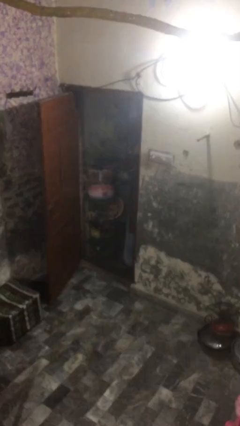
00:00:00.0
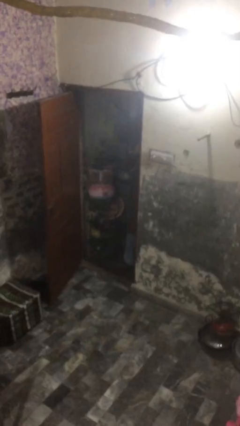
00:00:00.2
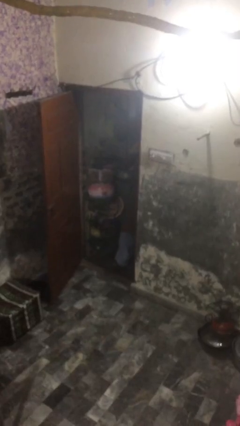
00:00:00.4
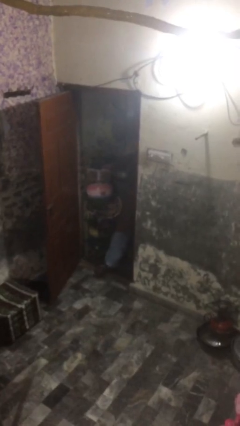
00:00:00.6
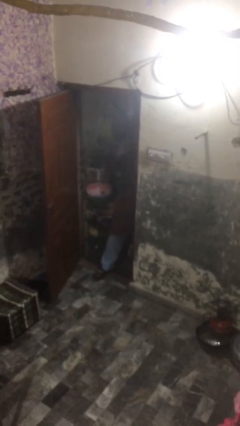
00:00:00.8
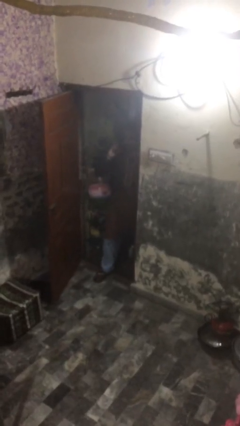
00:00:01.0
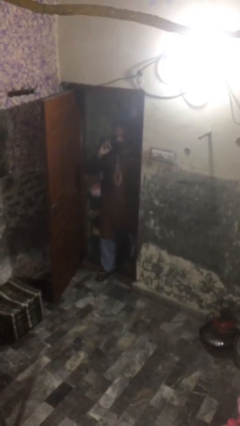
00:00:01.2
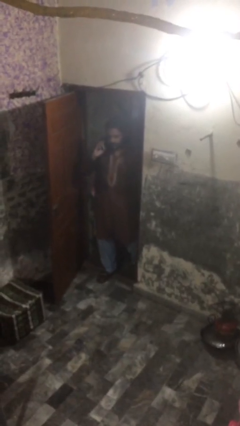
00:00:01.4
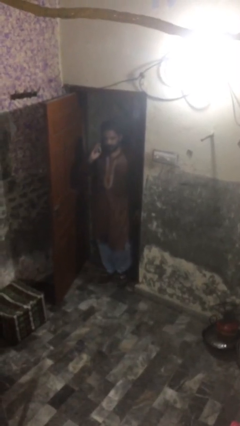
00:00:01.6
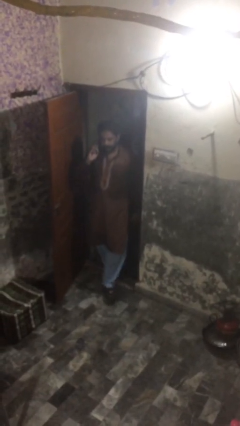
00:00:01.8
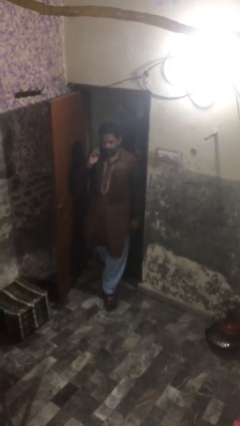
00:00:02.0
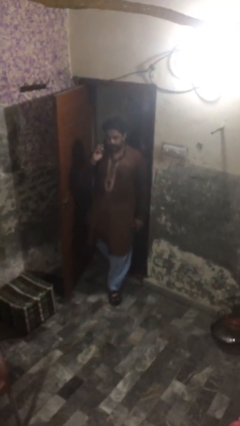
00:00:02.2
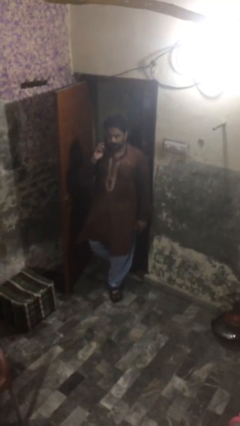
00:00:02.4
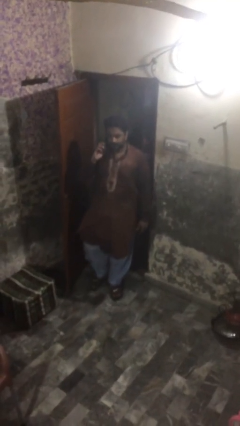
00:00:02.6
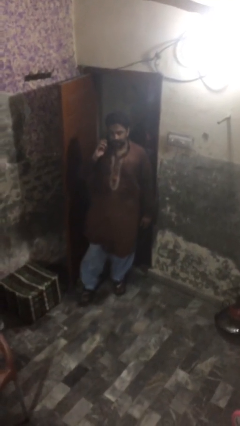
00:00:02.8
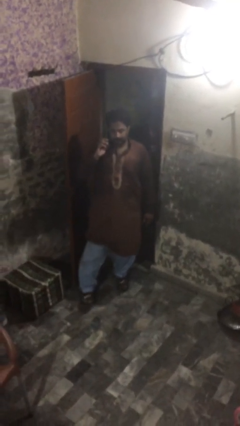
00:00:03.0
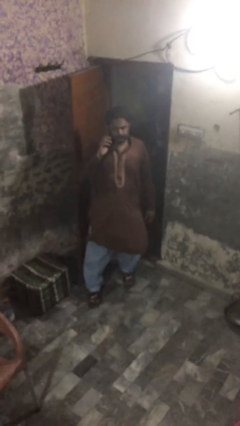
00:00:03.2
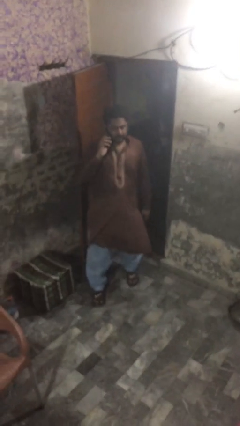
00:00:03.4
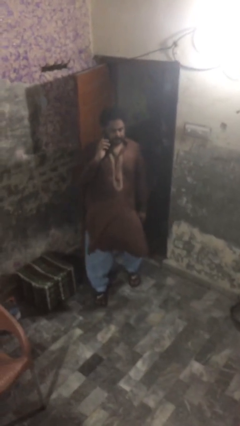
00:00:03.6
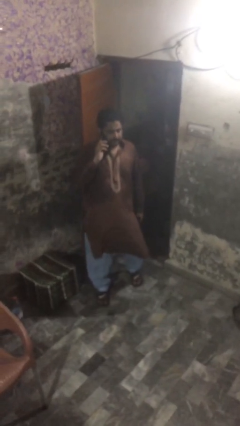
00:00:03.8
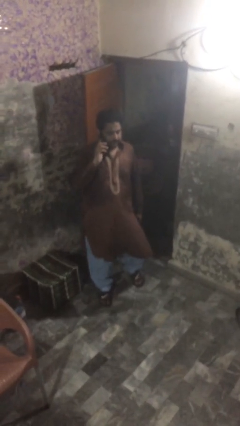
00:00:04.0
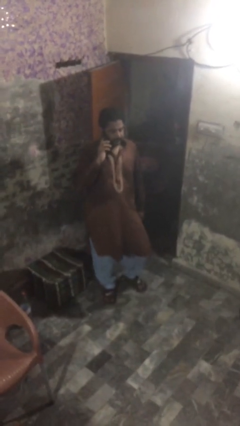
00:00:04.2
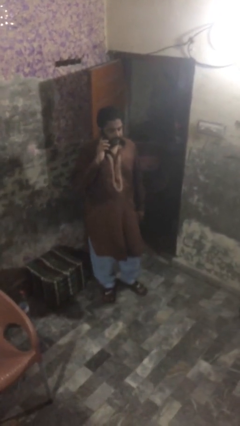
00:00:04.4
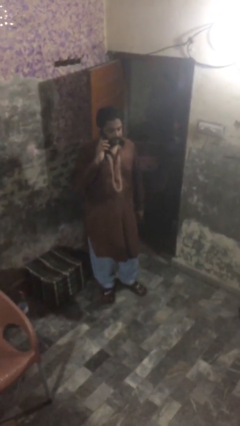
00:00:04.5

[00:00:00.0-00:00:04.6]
person enters scene through structure

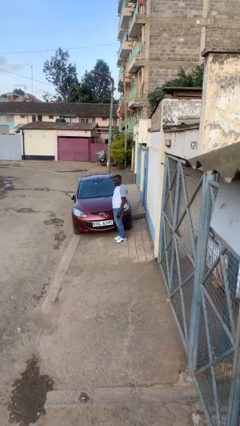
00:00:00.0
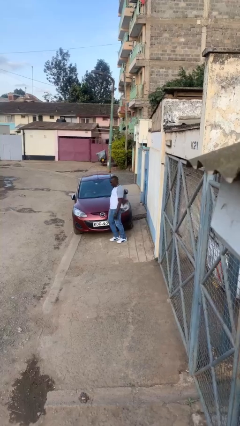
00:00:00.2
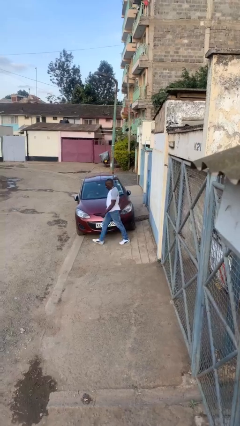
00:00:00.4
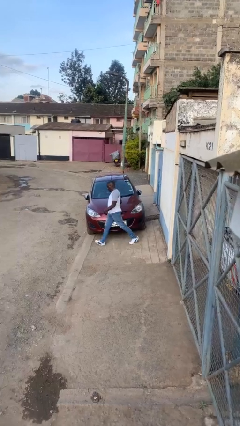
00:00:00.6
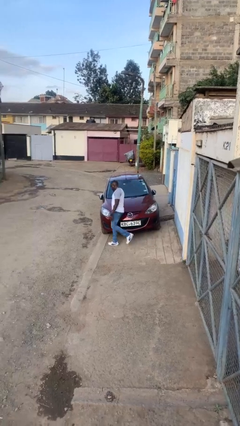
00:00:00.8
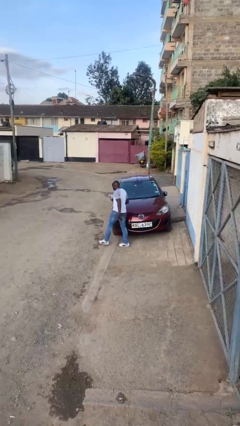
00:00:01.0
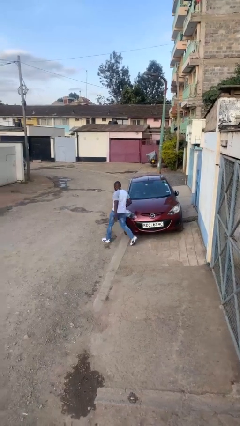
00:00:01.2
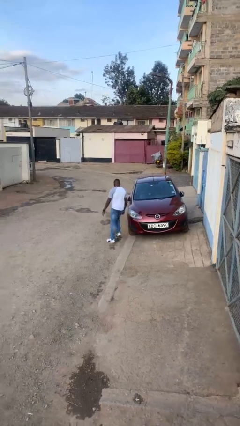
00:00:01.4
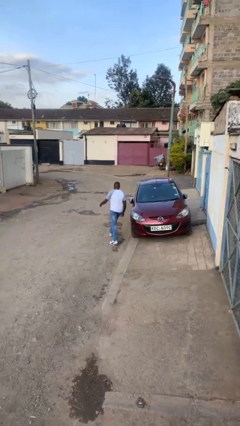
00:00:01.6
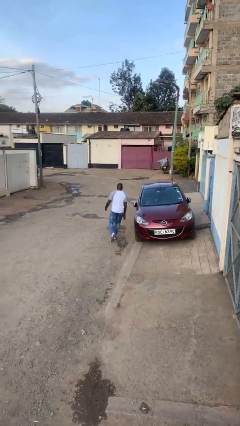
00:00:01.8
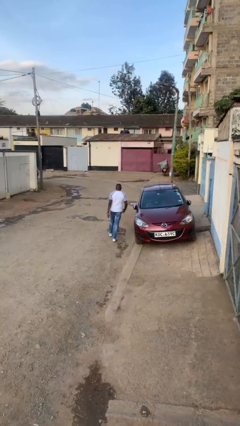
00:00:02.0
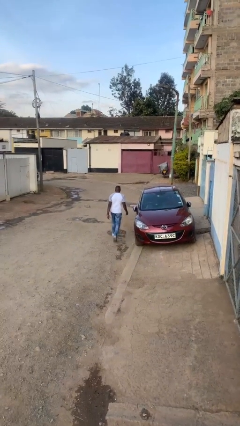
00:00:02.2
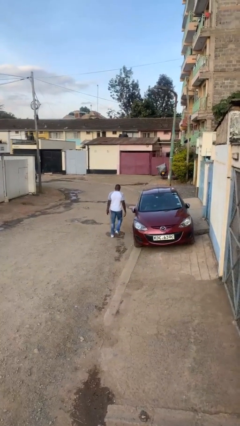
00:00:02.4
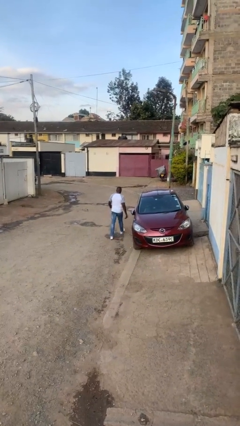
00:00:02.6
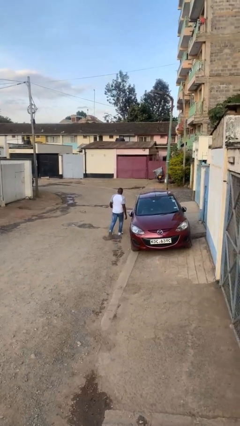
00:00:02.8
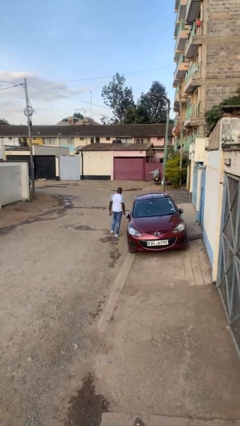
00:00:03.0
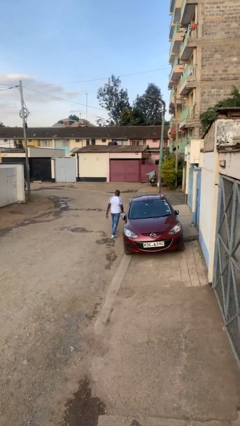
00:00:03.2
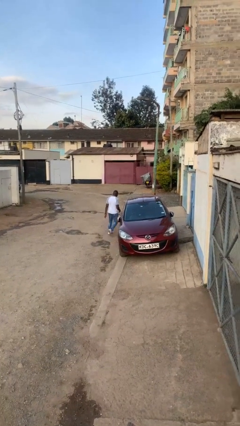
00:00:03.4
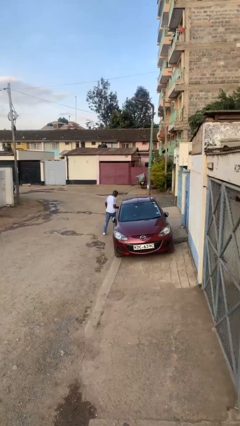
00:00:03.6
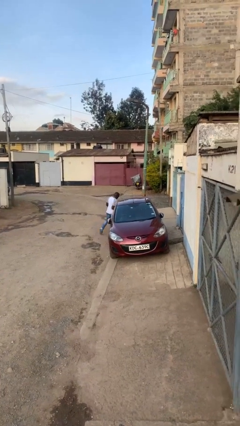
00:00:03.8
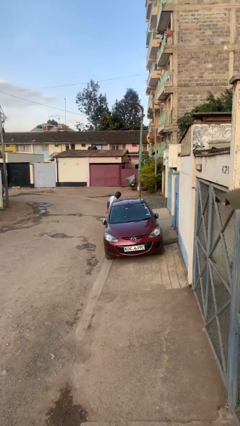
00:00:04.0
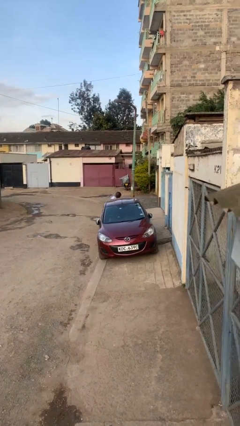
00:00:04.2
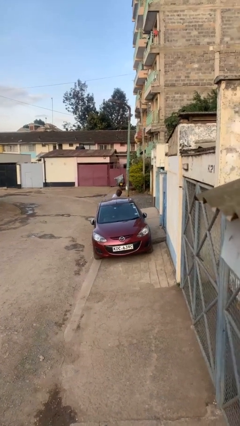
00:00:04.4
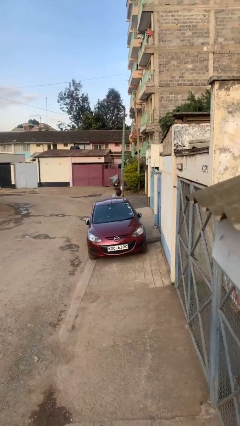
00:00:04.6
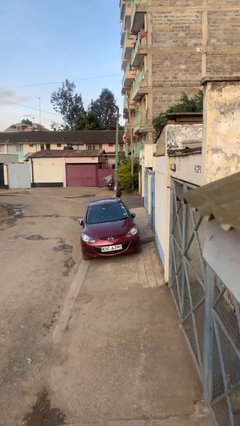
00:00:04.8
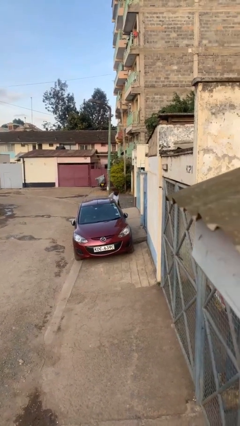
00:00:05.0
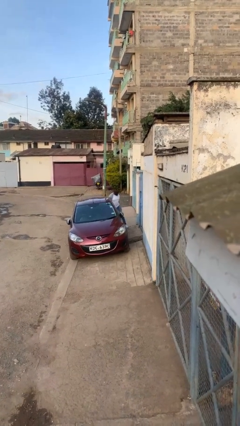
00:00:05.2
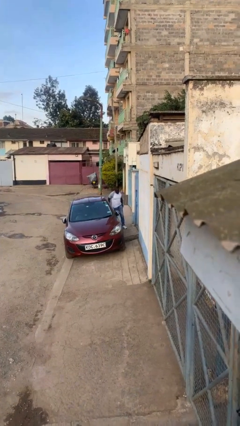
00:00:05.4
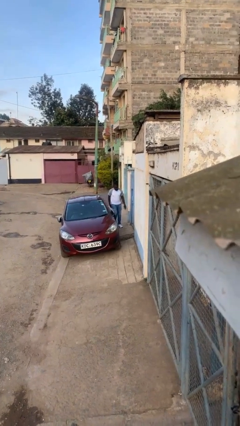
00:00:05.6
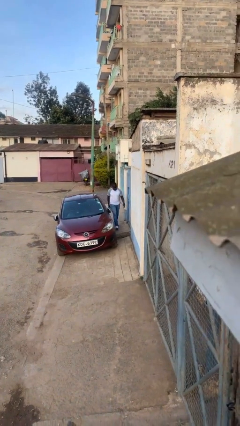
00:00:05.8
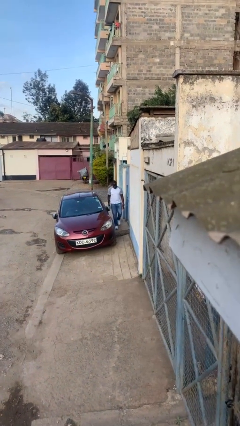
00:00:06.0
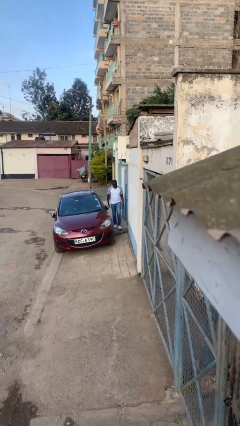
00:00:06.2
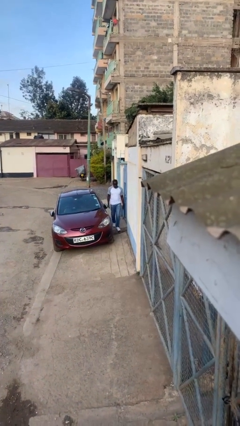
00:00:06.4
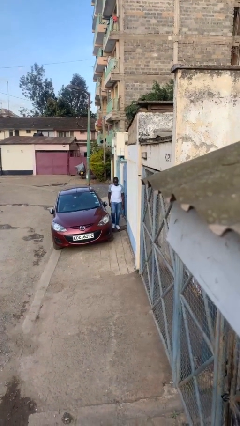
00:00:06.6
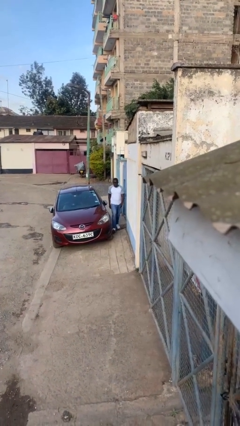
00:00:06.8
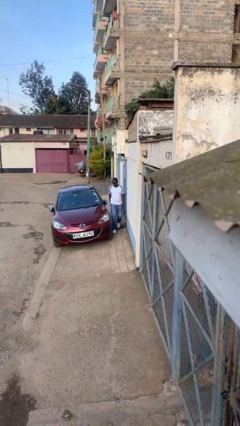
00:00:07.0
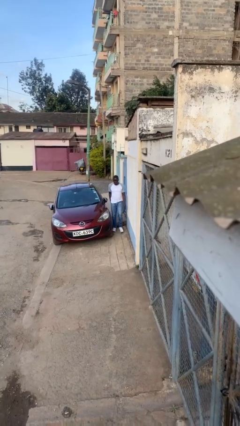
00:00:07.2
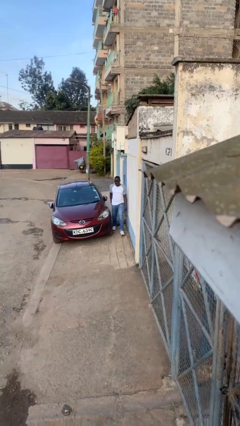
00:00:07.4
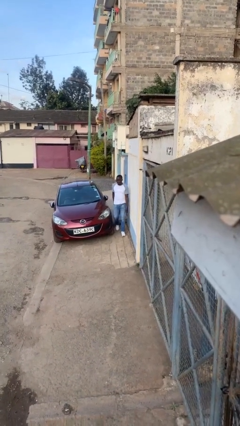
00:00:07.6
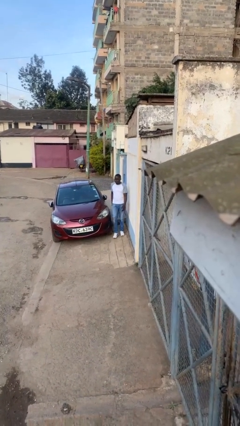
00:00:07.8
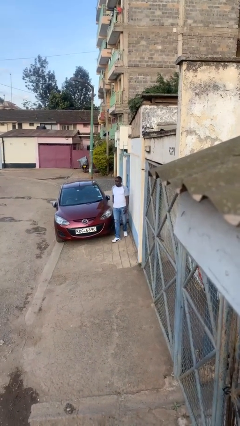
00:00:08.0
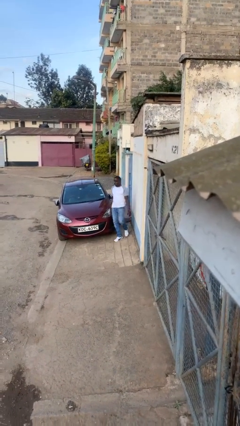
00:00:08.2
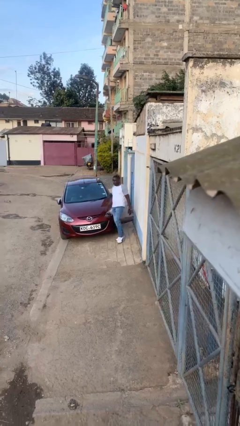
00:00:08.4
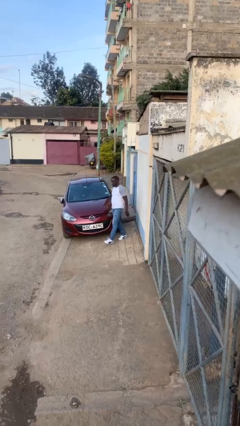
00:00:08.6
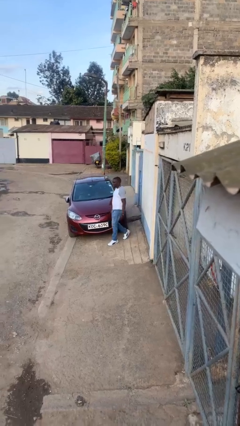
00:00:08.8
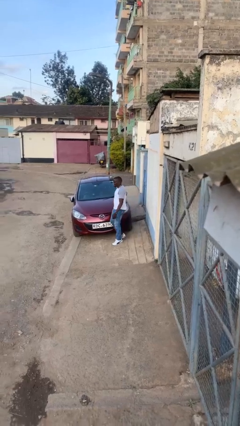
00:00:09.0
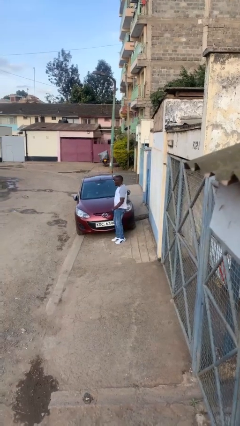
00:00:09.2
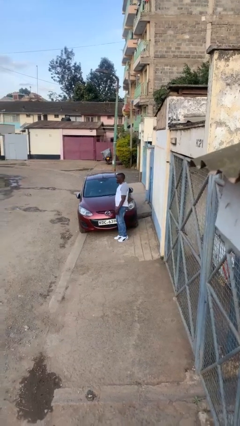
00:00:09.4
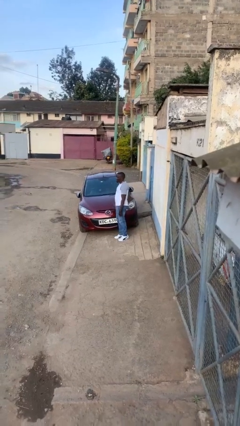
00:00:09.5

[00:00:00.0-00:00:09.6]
person walks around car

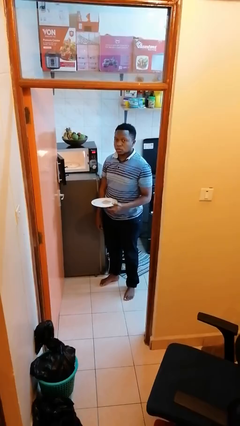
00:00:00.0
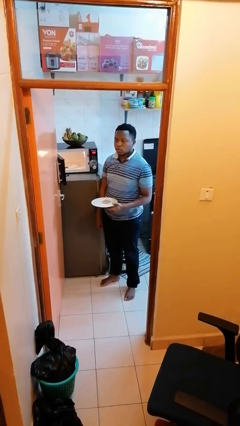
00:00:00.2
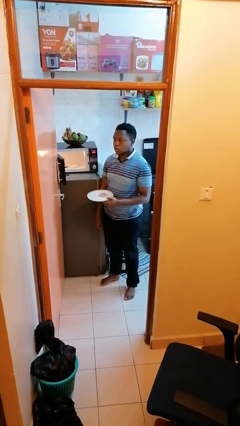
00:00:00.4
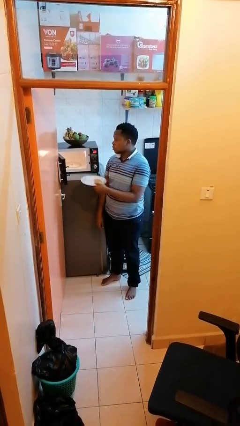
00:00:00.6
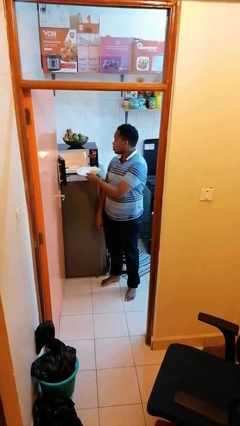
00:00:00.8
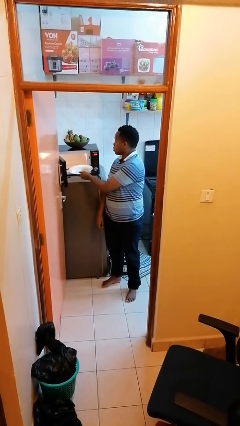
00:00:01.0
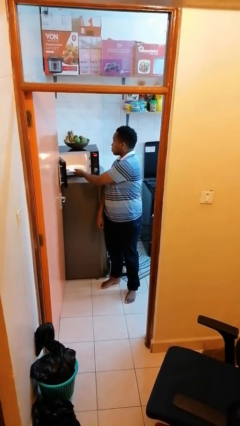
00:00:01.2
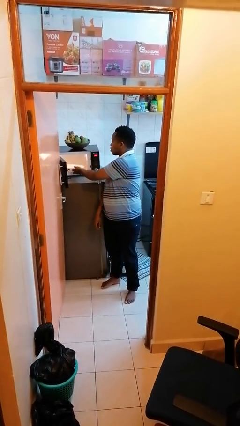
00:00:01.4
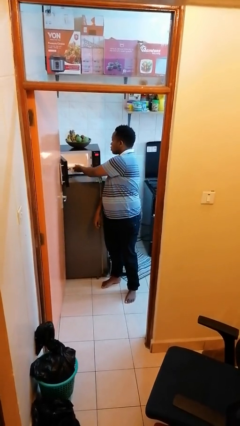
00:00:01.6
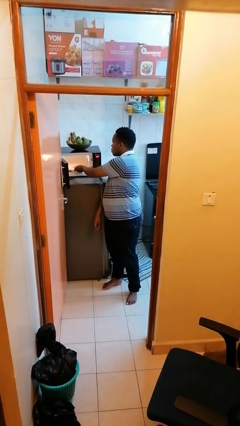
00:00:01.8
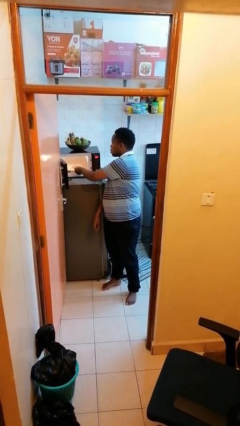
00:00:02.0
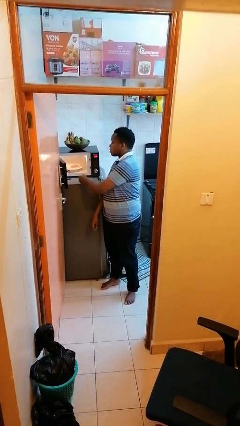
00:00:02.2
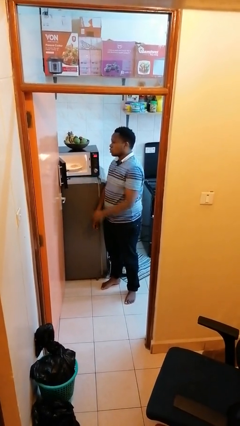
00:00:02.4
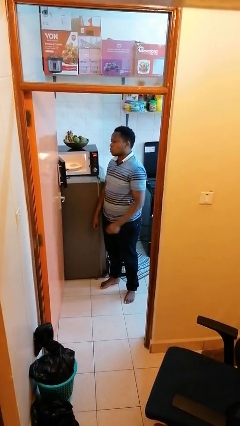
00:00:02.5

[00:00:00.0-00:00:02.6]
person puts object into microwave

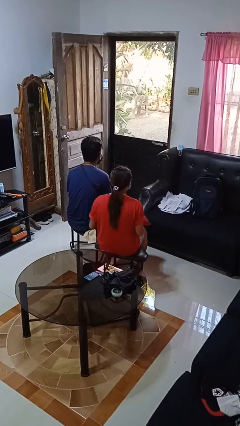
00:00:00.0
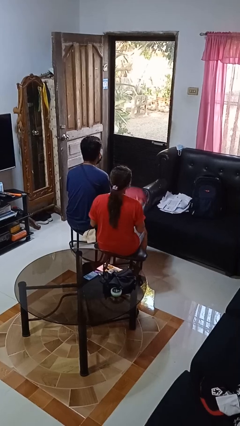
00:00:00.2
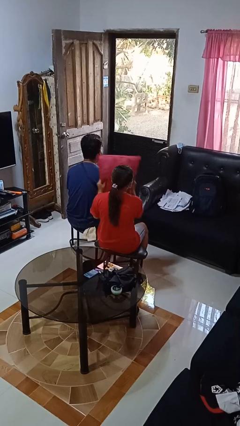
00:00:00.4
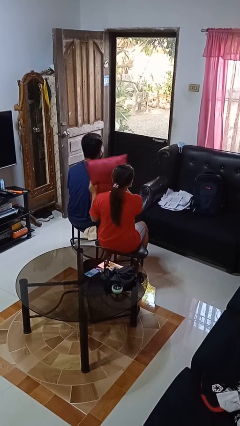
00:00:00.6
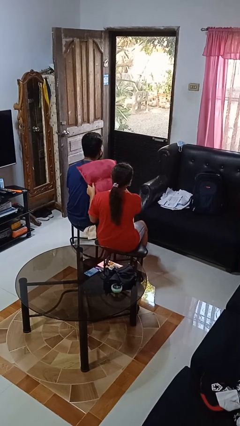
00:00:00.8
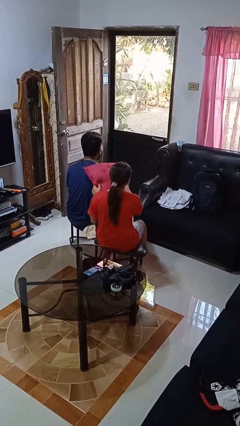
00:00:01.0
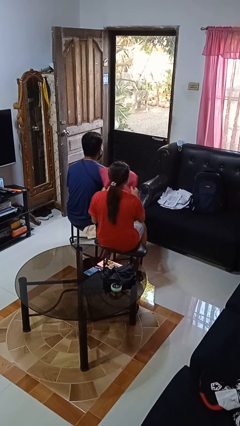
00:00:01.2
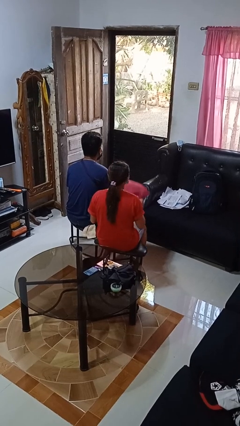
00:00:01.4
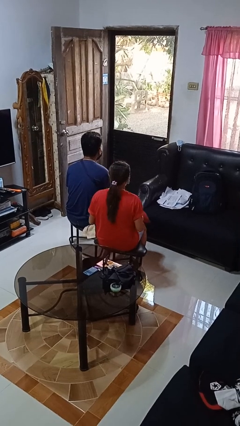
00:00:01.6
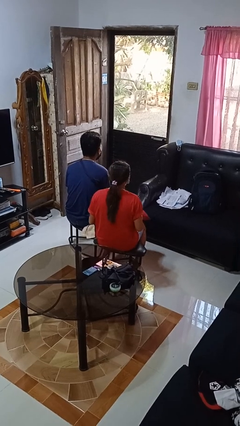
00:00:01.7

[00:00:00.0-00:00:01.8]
person hits person with pillow
